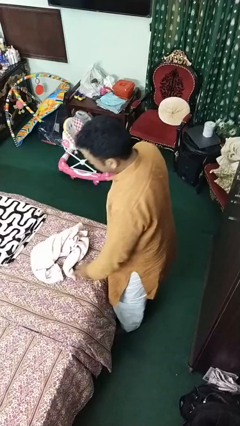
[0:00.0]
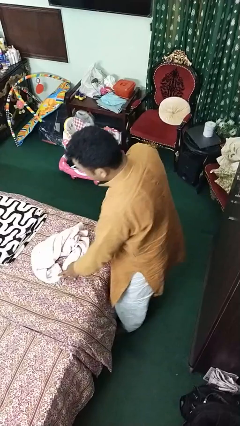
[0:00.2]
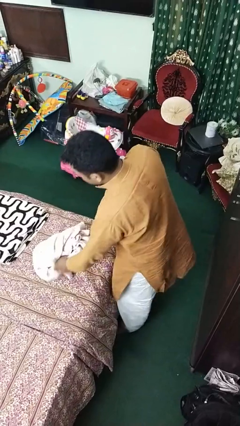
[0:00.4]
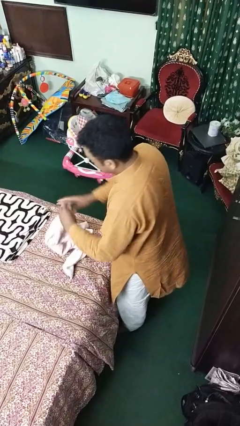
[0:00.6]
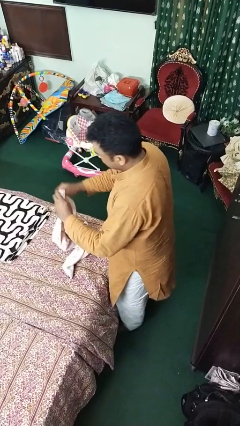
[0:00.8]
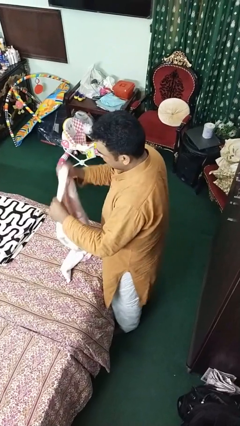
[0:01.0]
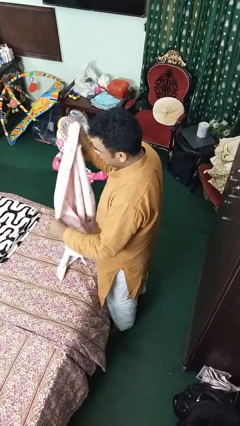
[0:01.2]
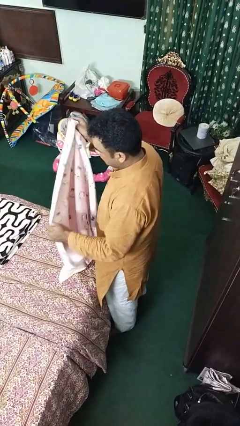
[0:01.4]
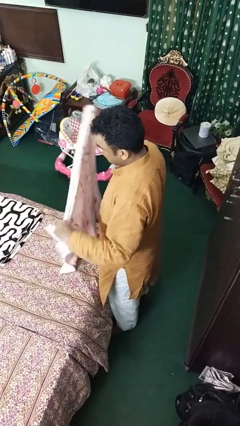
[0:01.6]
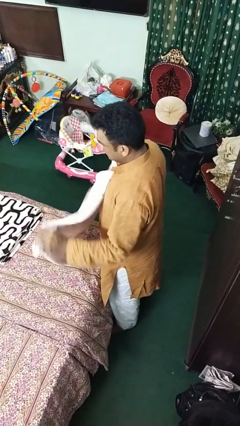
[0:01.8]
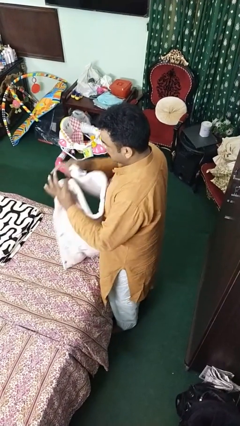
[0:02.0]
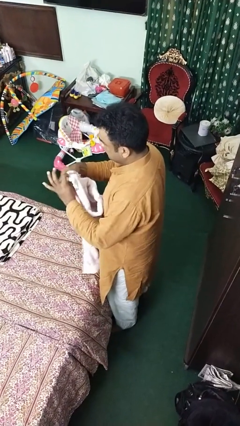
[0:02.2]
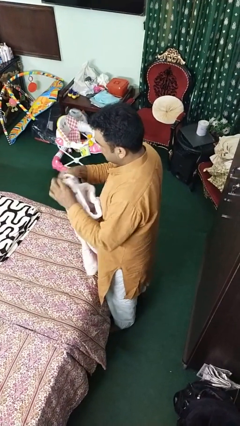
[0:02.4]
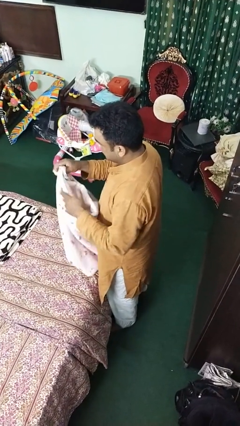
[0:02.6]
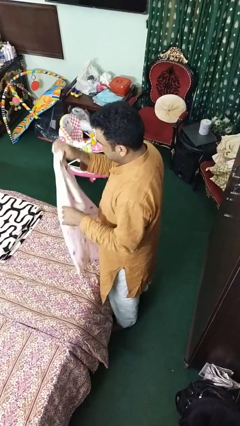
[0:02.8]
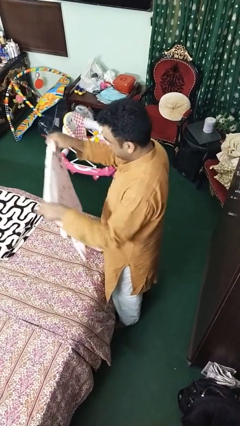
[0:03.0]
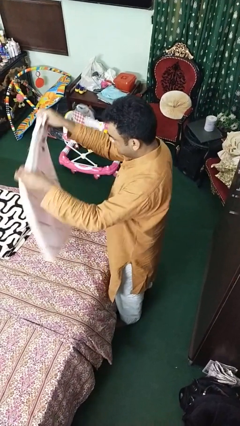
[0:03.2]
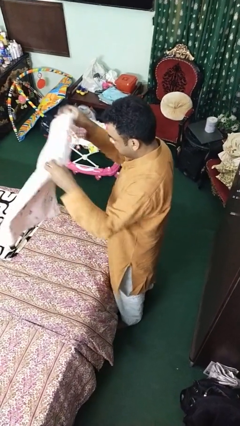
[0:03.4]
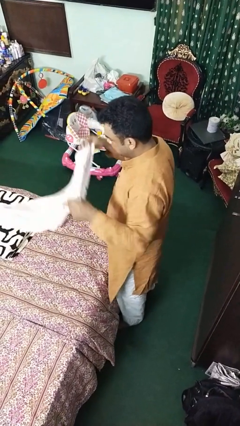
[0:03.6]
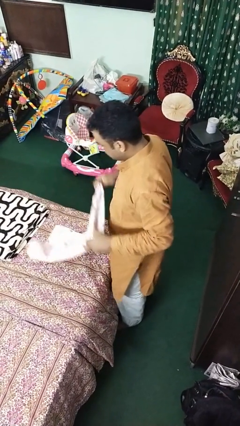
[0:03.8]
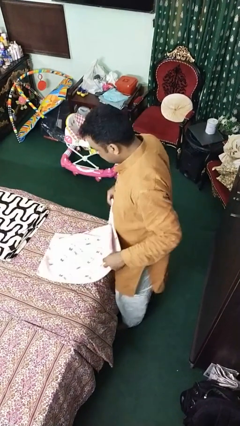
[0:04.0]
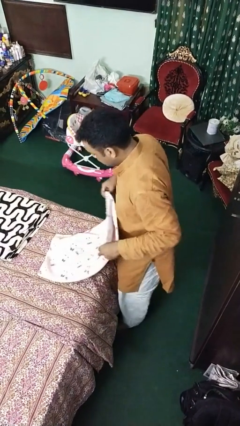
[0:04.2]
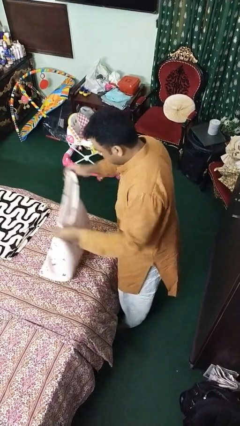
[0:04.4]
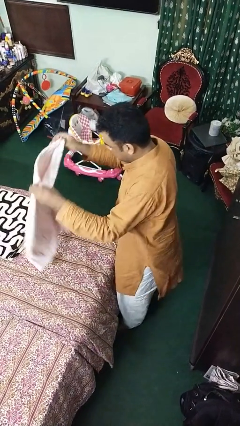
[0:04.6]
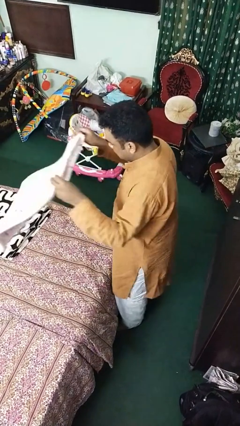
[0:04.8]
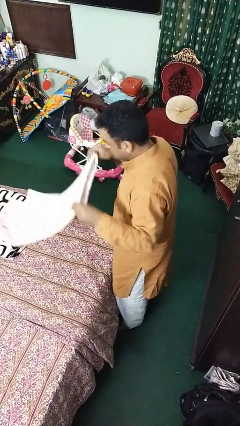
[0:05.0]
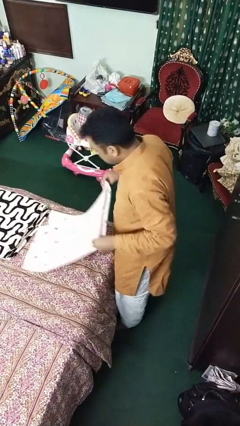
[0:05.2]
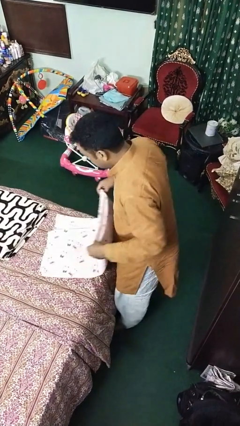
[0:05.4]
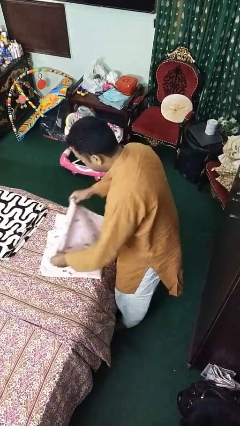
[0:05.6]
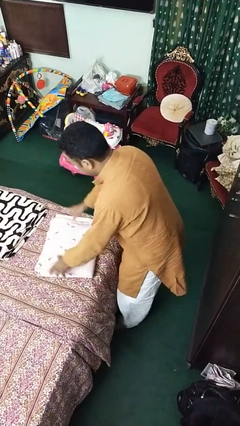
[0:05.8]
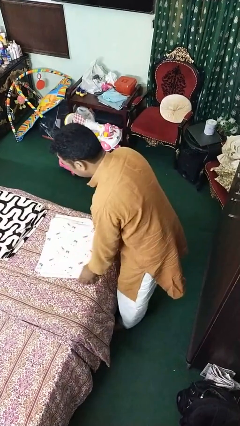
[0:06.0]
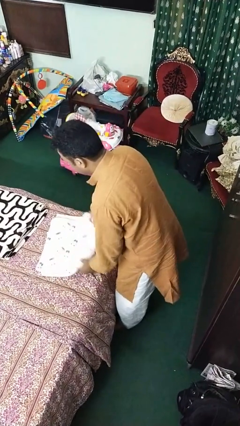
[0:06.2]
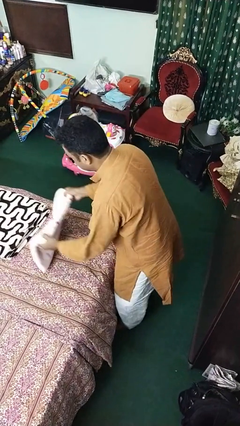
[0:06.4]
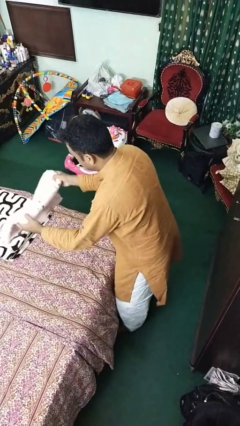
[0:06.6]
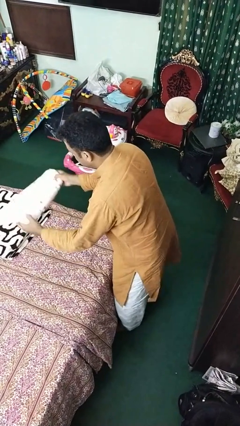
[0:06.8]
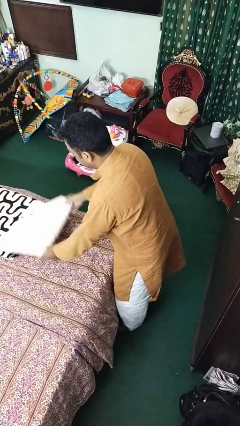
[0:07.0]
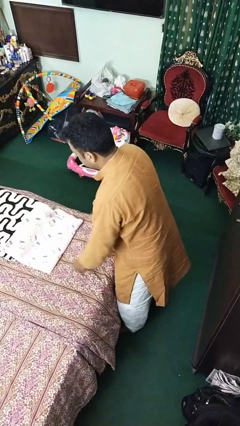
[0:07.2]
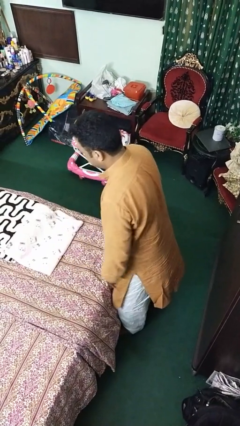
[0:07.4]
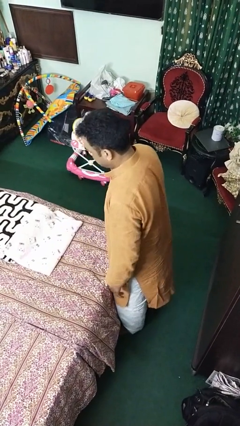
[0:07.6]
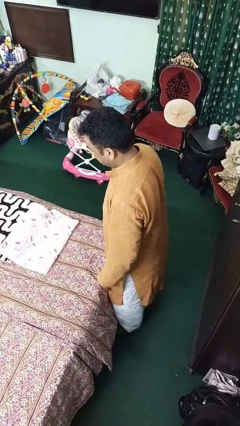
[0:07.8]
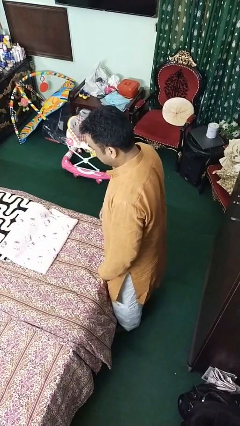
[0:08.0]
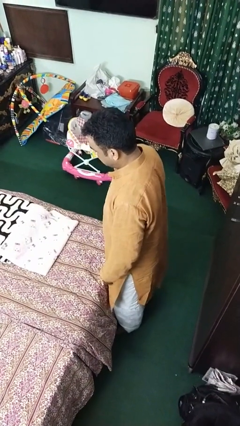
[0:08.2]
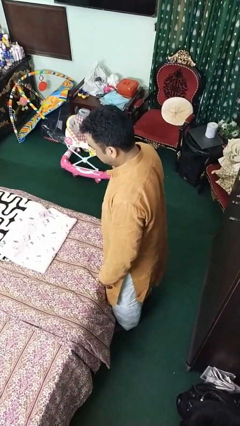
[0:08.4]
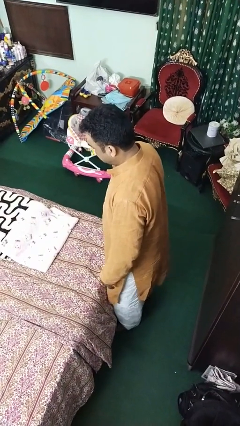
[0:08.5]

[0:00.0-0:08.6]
person folds blanket

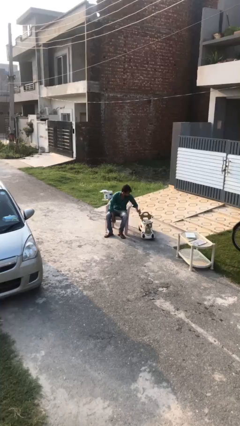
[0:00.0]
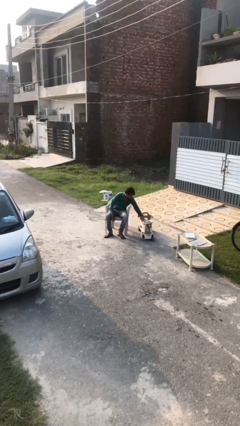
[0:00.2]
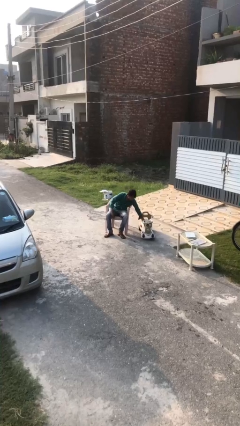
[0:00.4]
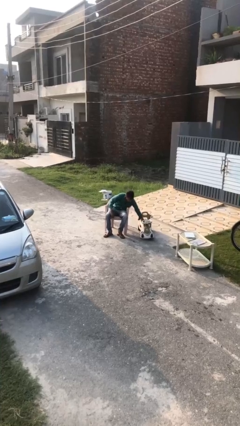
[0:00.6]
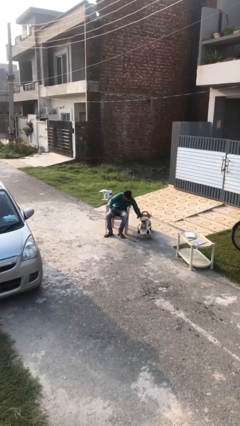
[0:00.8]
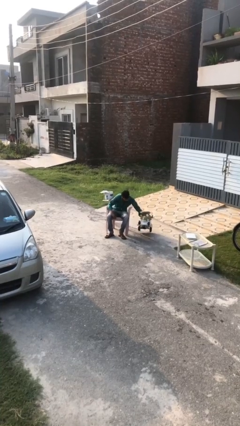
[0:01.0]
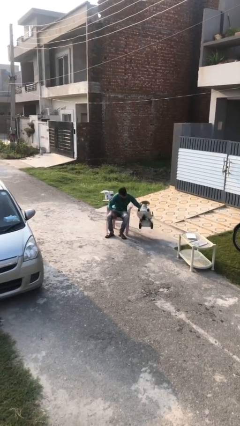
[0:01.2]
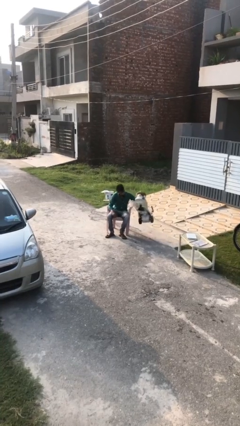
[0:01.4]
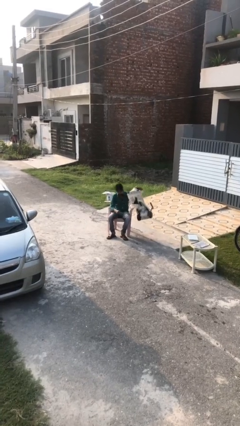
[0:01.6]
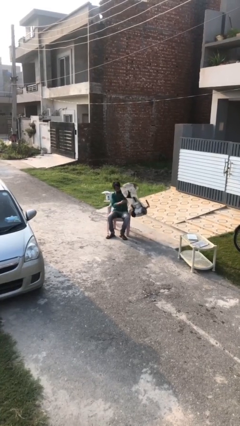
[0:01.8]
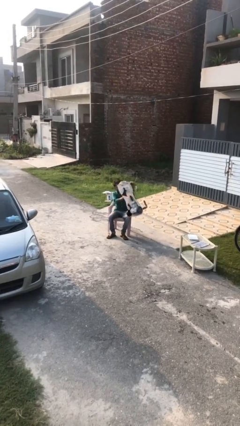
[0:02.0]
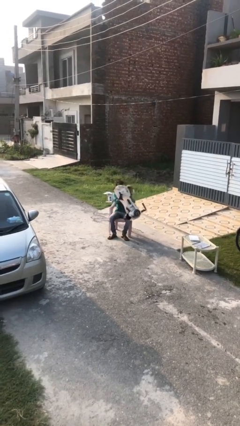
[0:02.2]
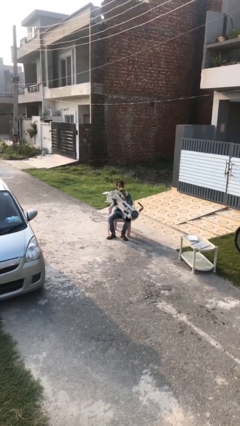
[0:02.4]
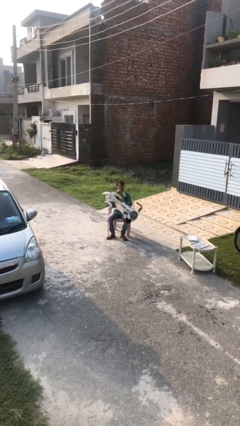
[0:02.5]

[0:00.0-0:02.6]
person picks up object from floor

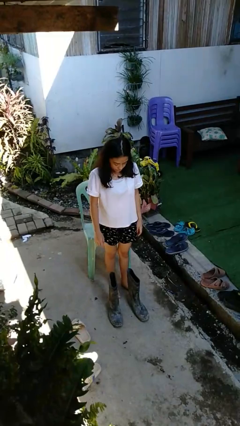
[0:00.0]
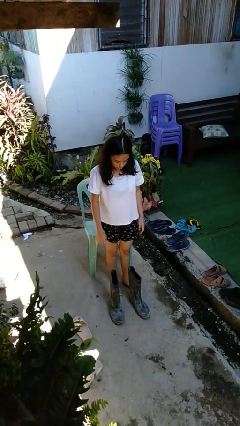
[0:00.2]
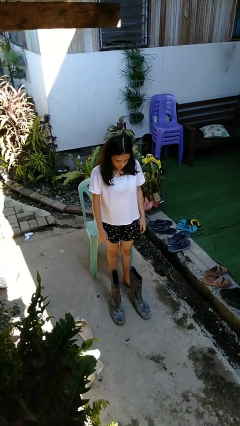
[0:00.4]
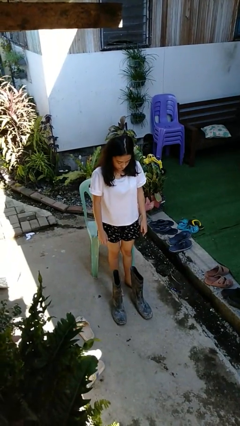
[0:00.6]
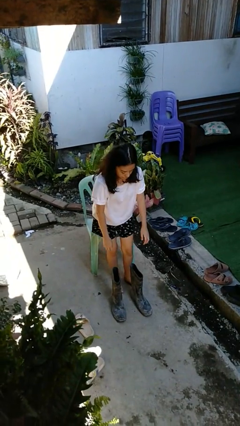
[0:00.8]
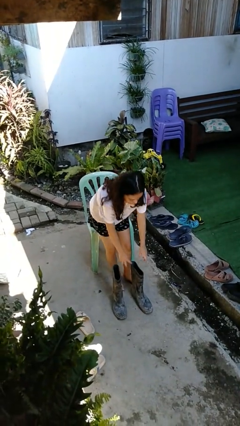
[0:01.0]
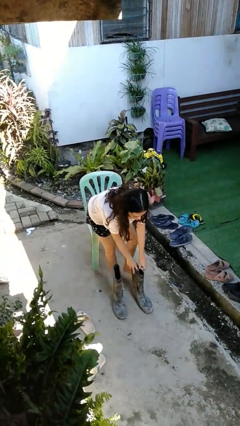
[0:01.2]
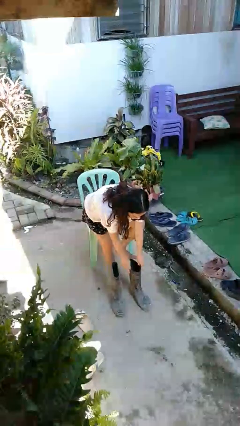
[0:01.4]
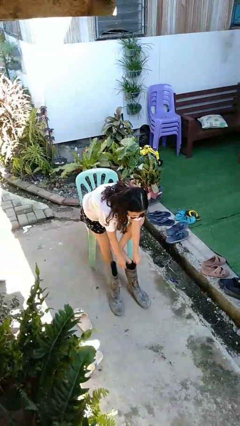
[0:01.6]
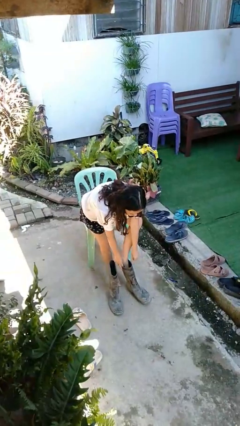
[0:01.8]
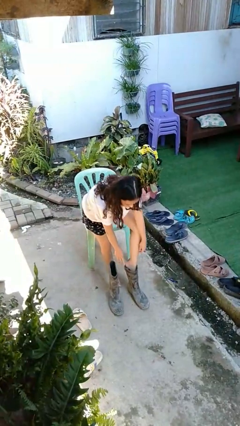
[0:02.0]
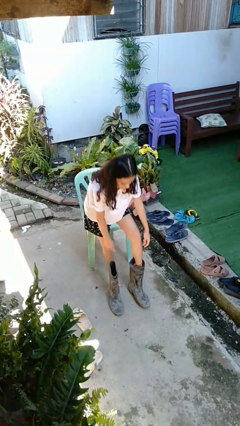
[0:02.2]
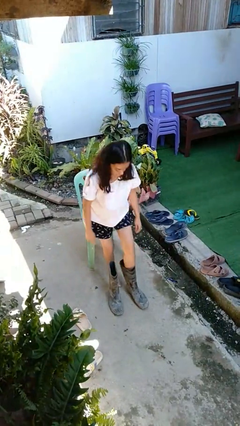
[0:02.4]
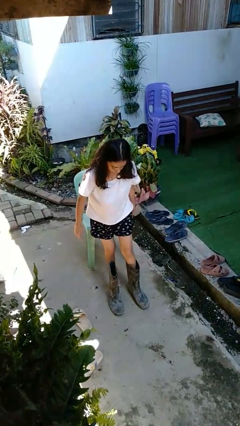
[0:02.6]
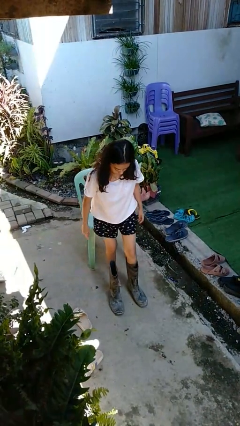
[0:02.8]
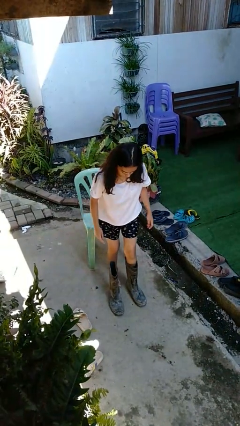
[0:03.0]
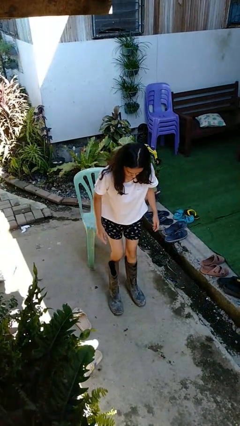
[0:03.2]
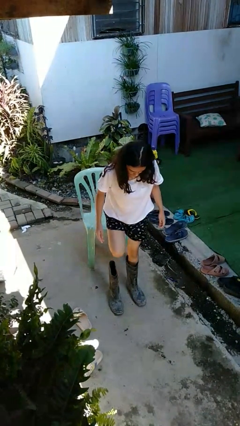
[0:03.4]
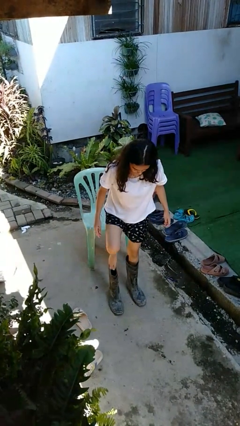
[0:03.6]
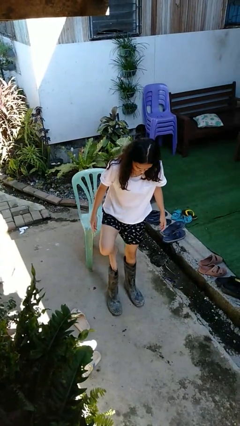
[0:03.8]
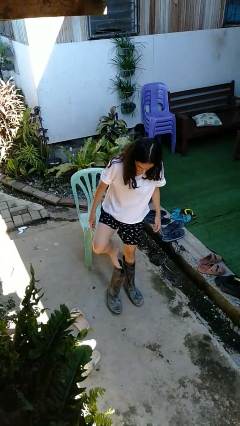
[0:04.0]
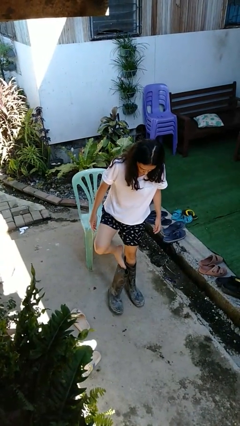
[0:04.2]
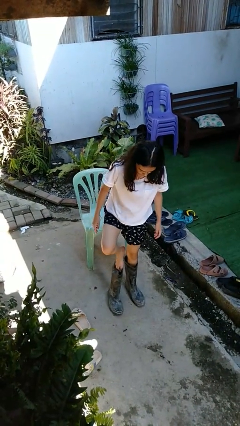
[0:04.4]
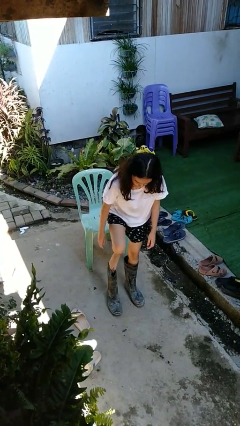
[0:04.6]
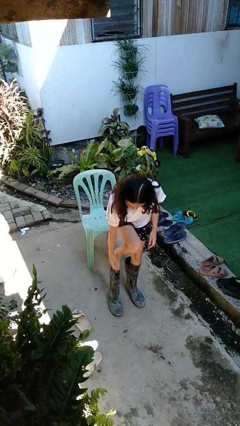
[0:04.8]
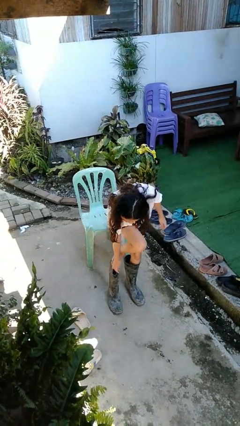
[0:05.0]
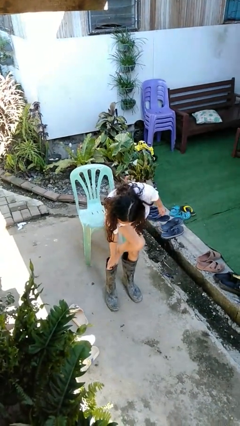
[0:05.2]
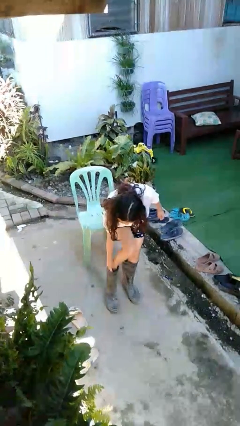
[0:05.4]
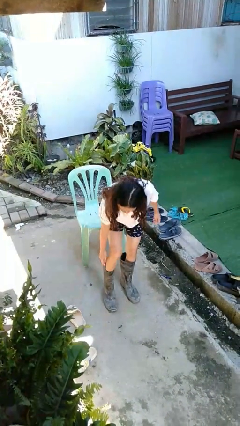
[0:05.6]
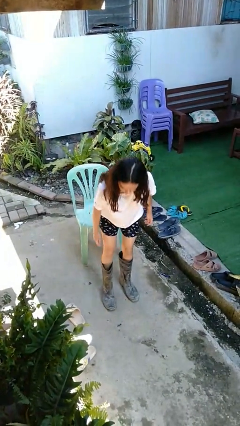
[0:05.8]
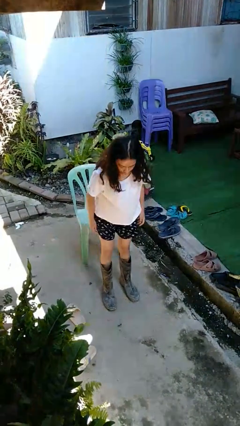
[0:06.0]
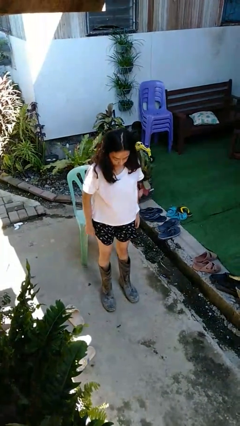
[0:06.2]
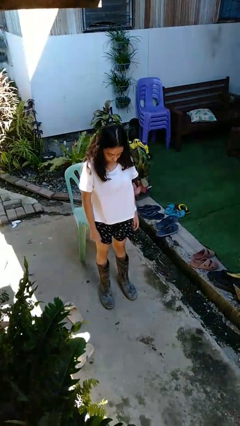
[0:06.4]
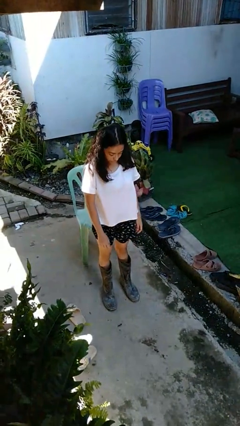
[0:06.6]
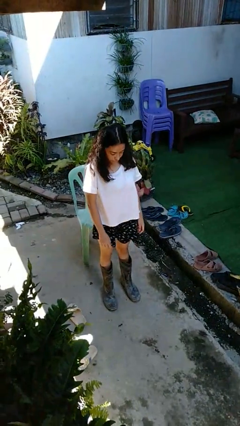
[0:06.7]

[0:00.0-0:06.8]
person puts on boots
